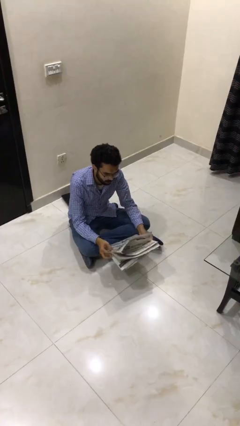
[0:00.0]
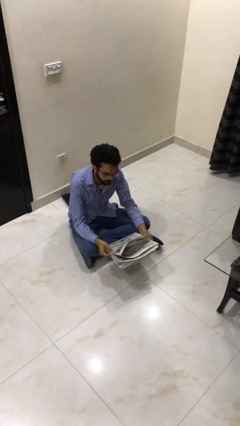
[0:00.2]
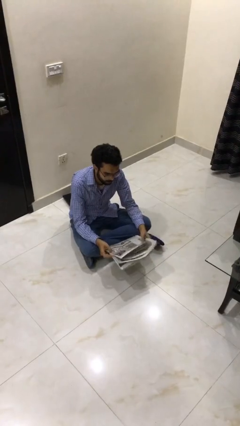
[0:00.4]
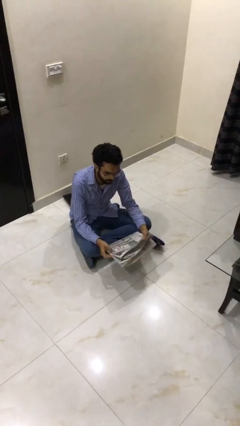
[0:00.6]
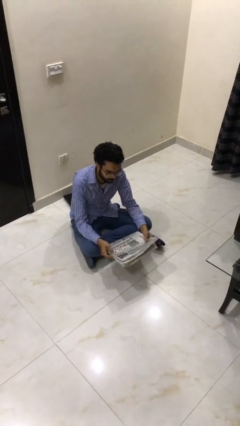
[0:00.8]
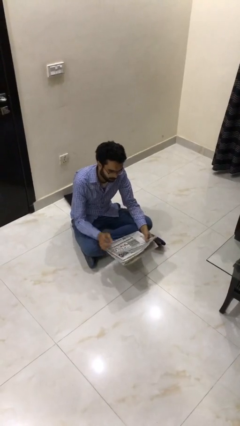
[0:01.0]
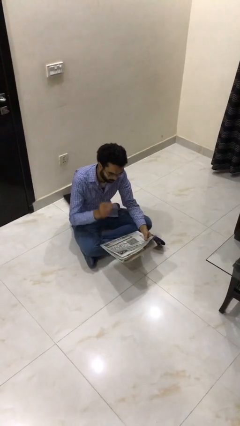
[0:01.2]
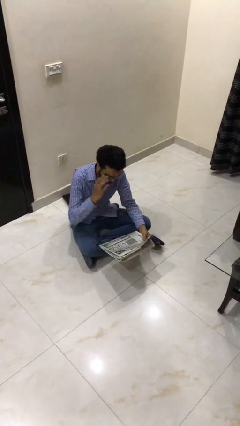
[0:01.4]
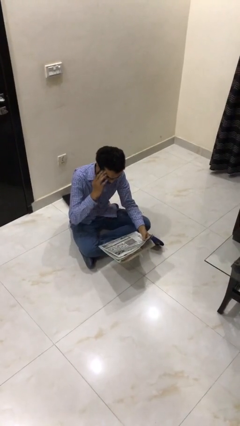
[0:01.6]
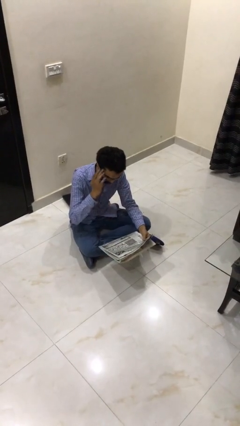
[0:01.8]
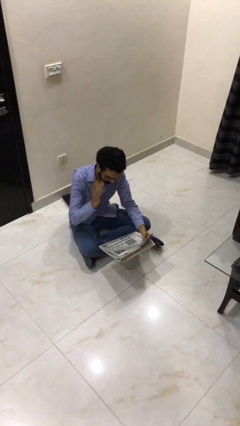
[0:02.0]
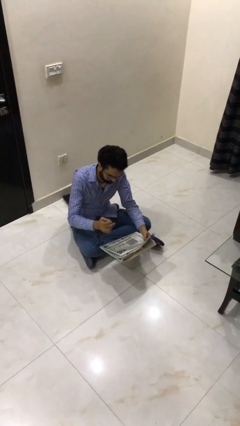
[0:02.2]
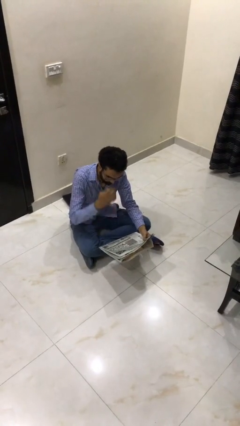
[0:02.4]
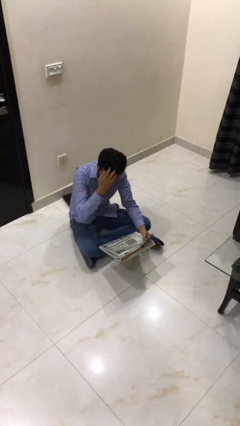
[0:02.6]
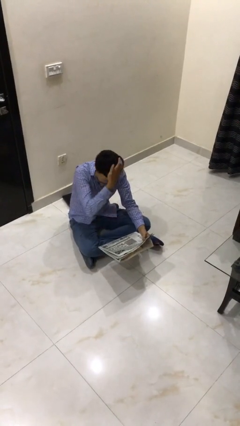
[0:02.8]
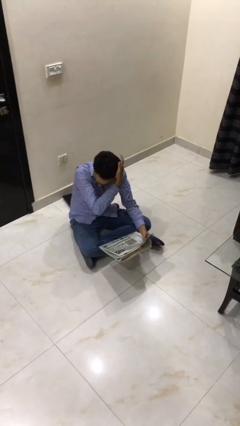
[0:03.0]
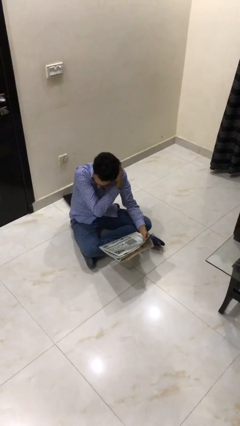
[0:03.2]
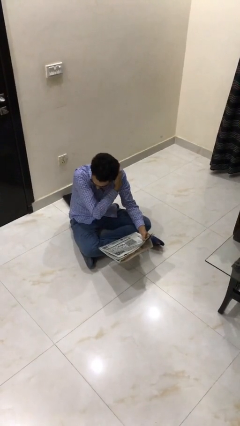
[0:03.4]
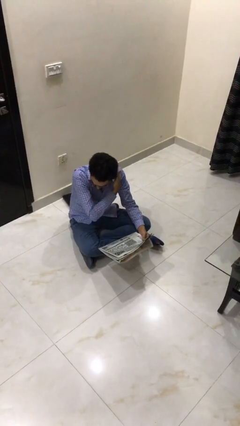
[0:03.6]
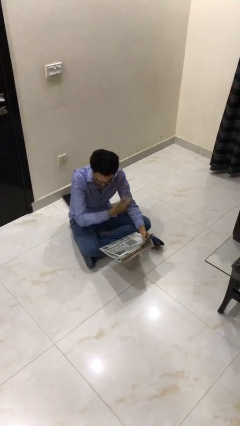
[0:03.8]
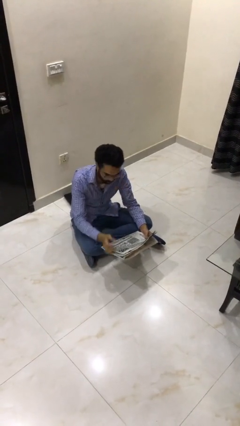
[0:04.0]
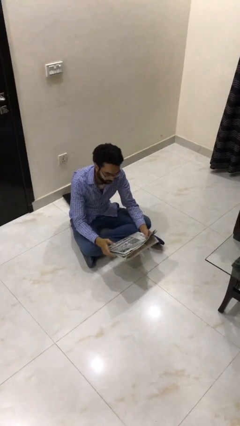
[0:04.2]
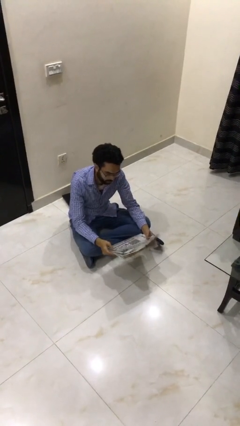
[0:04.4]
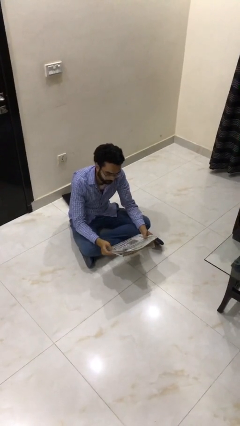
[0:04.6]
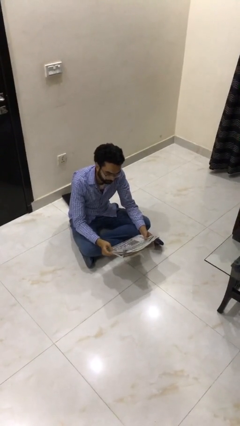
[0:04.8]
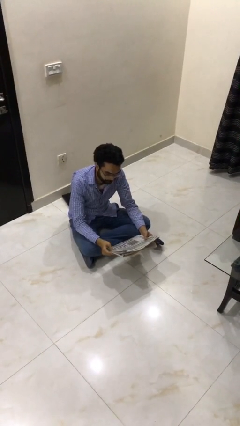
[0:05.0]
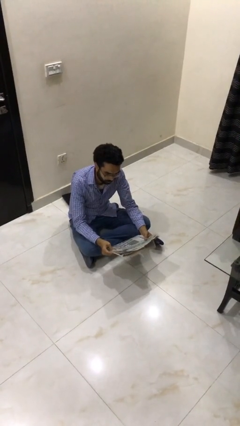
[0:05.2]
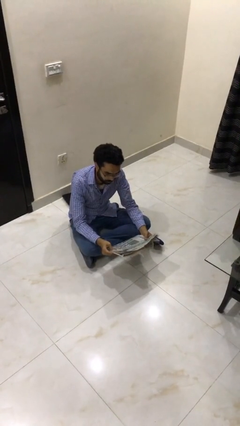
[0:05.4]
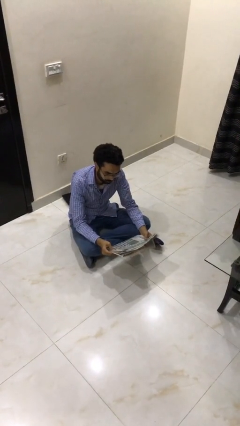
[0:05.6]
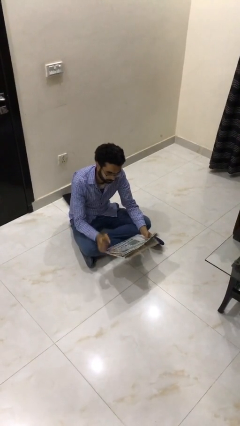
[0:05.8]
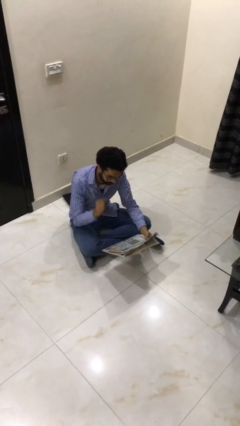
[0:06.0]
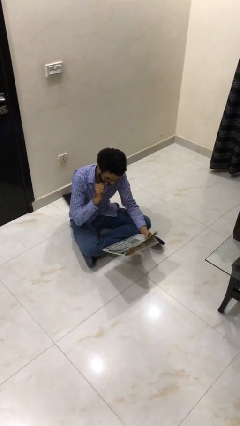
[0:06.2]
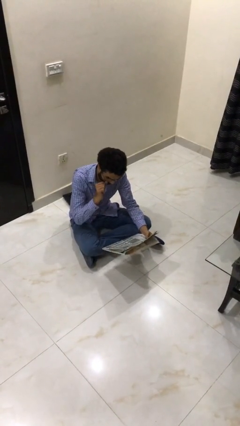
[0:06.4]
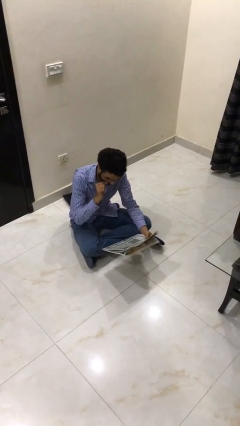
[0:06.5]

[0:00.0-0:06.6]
person reads document

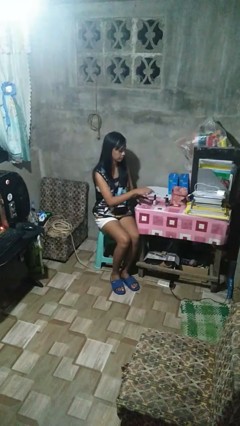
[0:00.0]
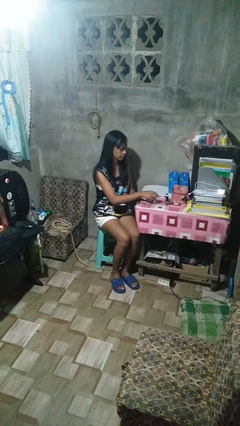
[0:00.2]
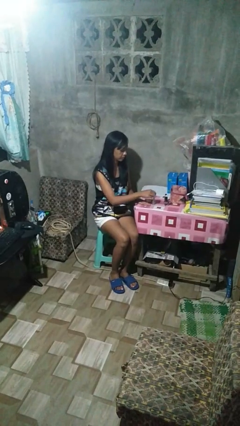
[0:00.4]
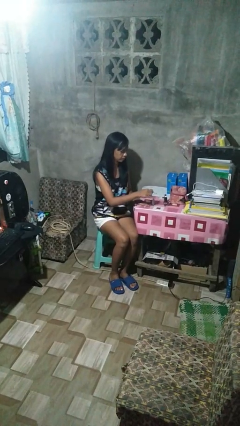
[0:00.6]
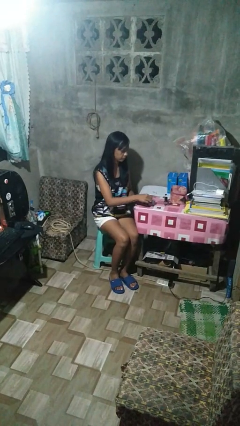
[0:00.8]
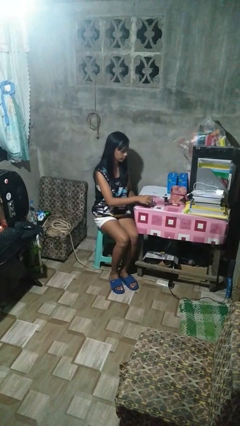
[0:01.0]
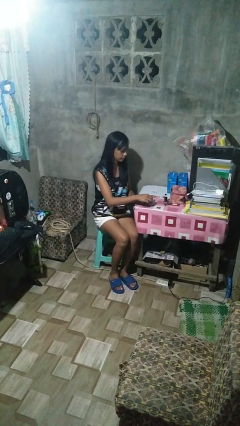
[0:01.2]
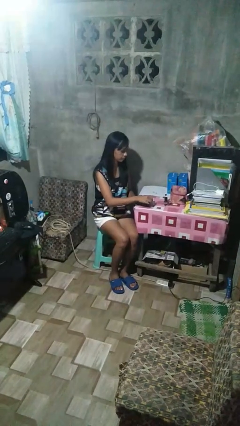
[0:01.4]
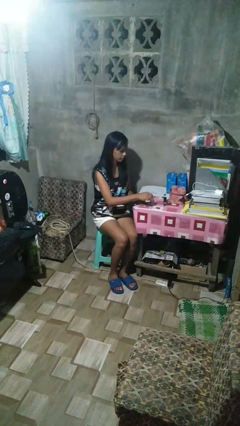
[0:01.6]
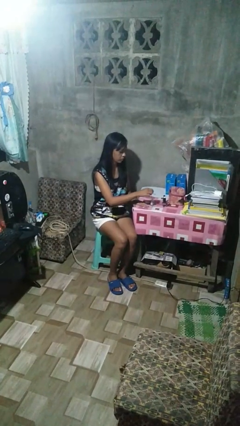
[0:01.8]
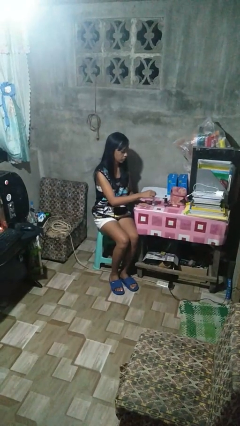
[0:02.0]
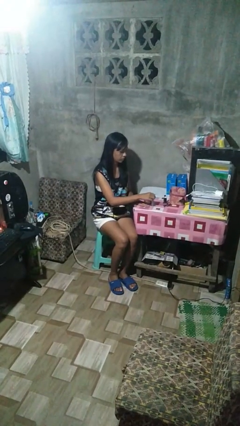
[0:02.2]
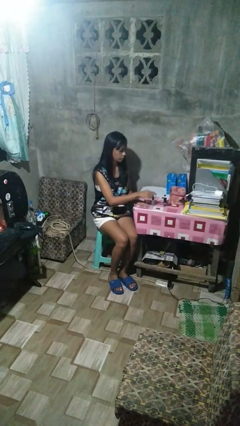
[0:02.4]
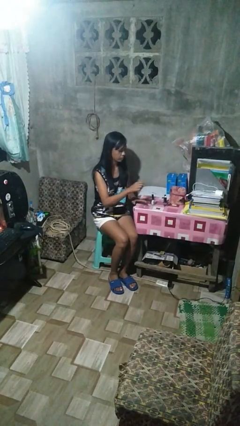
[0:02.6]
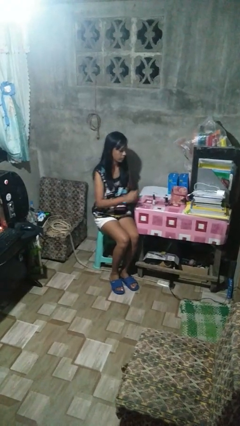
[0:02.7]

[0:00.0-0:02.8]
person paints fingernails

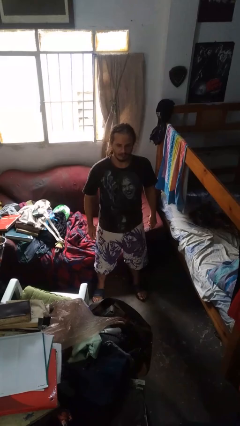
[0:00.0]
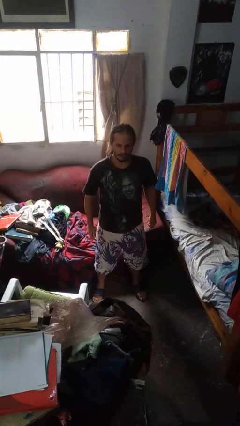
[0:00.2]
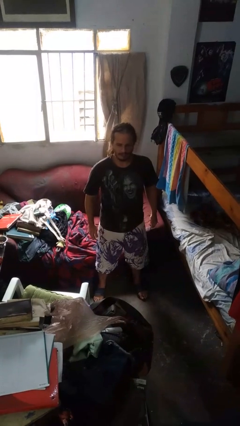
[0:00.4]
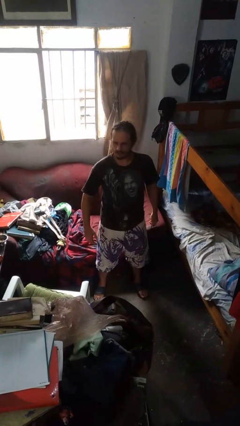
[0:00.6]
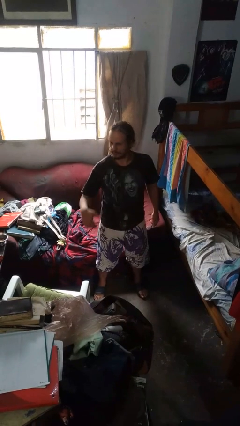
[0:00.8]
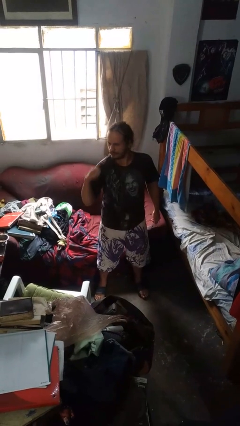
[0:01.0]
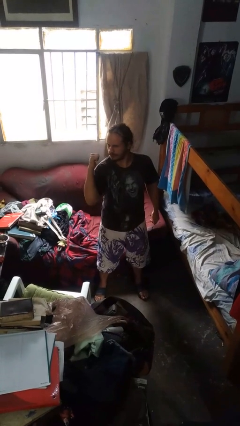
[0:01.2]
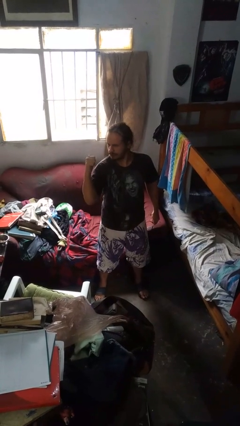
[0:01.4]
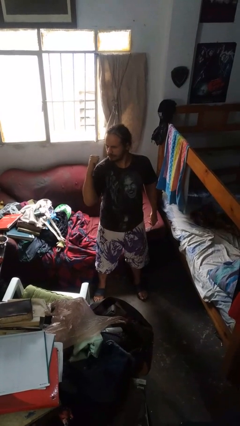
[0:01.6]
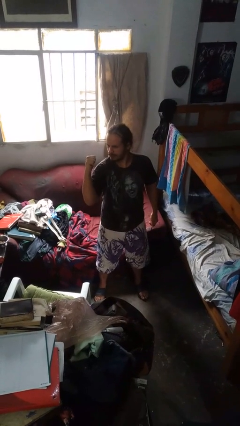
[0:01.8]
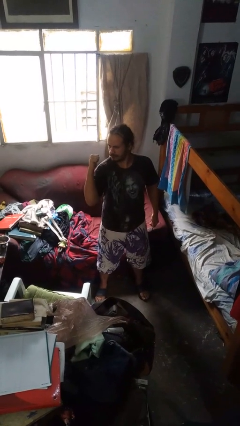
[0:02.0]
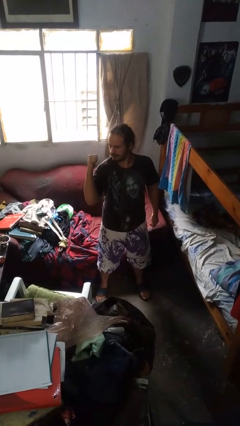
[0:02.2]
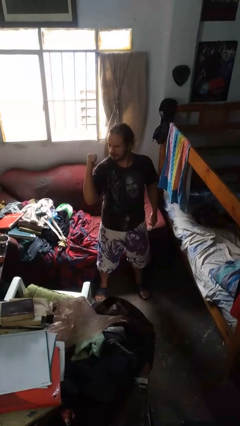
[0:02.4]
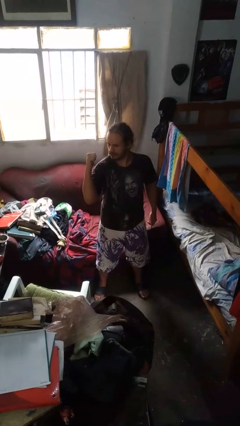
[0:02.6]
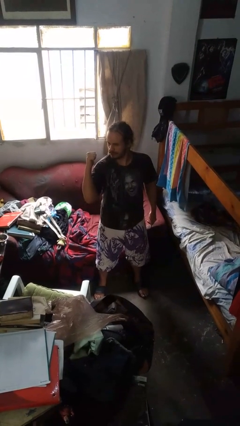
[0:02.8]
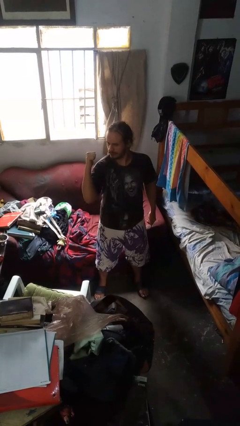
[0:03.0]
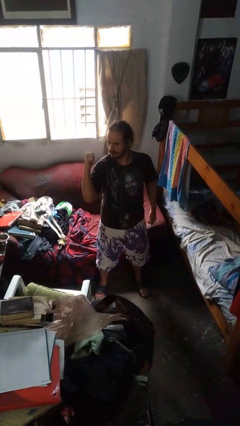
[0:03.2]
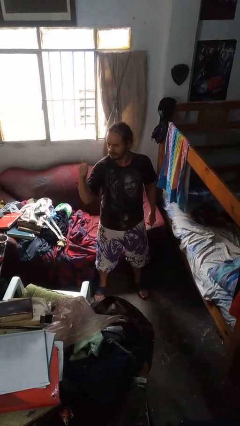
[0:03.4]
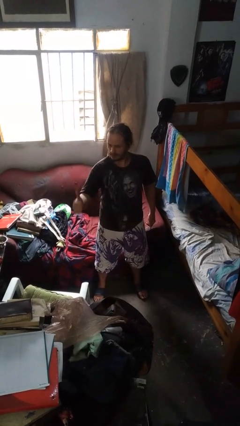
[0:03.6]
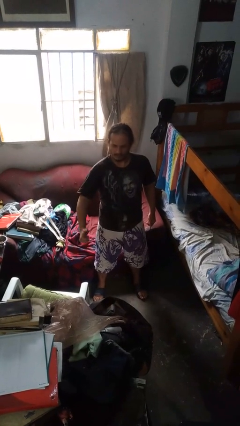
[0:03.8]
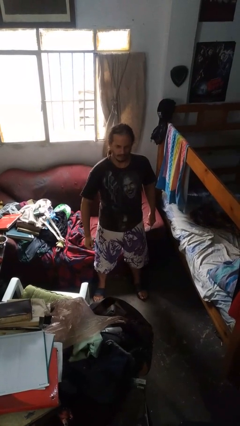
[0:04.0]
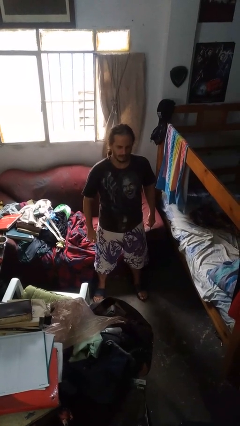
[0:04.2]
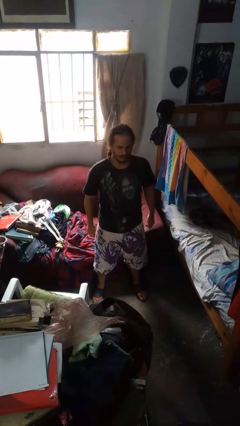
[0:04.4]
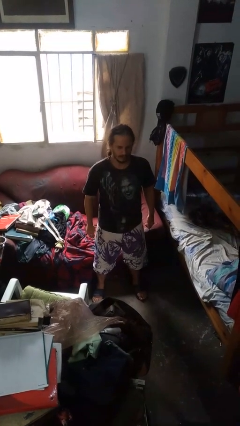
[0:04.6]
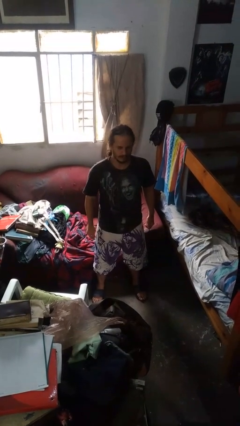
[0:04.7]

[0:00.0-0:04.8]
person gestures behind me

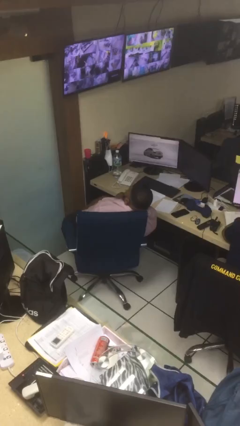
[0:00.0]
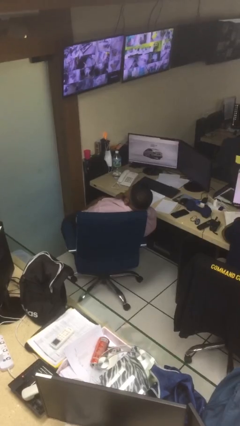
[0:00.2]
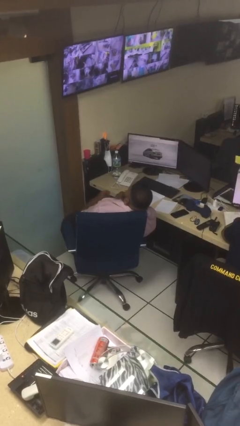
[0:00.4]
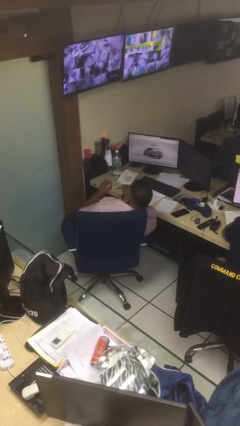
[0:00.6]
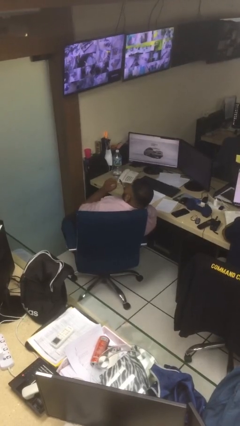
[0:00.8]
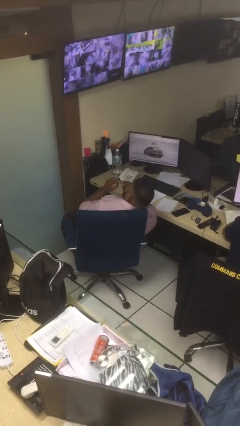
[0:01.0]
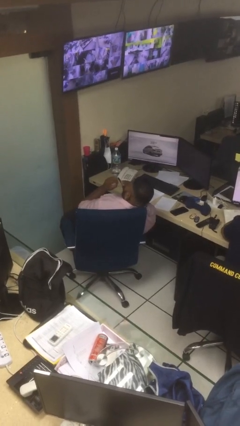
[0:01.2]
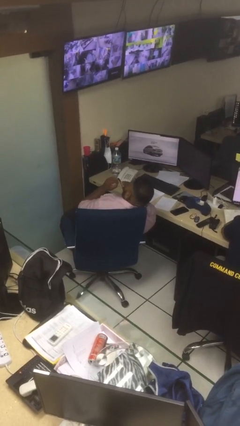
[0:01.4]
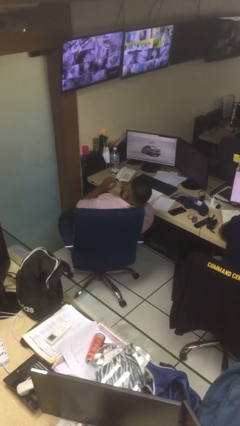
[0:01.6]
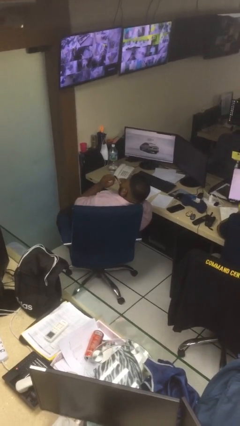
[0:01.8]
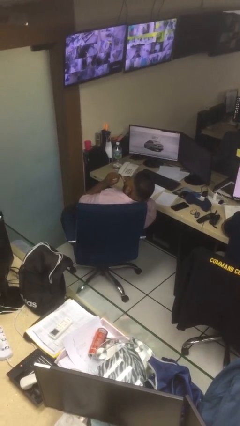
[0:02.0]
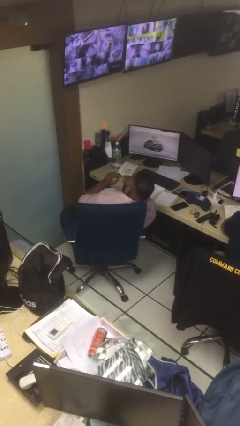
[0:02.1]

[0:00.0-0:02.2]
person files fingernails

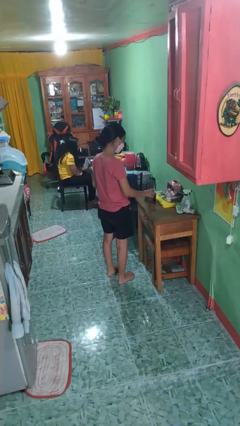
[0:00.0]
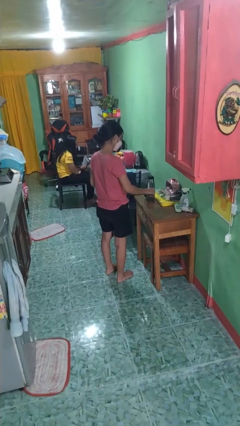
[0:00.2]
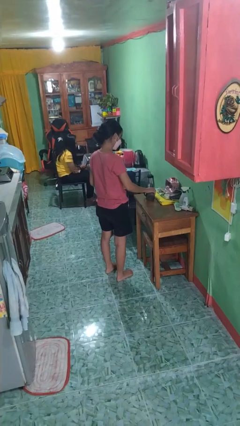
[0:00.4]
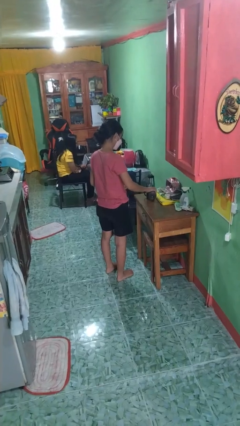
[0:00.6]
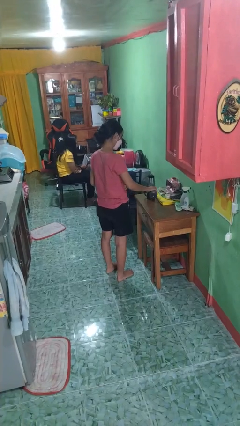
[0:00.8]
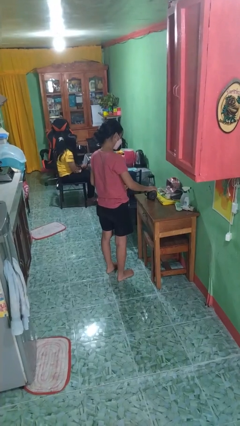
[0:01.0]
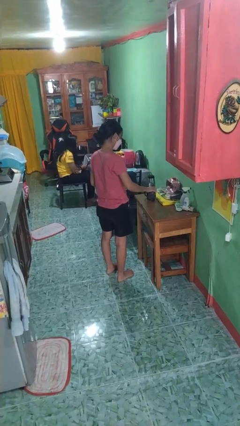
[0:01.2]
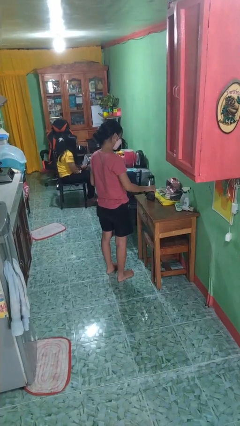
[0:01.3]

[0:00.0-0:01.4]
person pours liquid into cup
